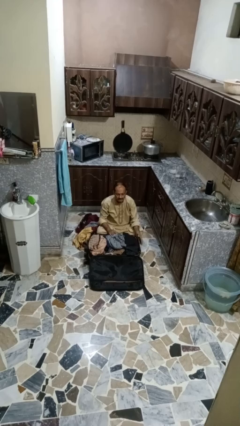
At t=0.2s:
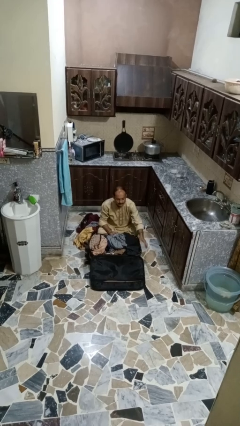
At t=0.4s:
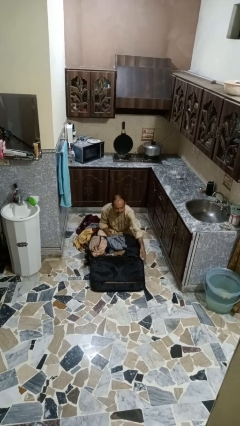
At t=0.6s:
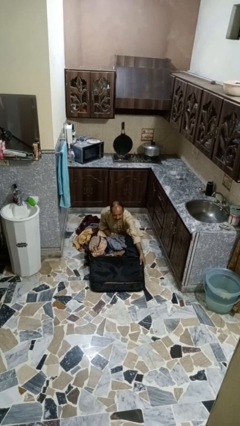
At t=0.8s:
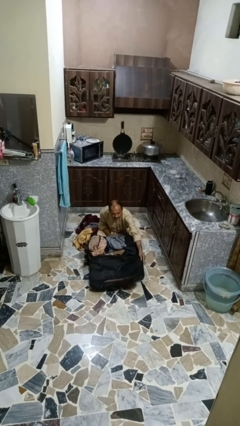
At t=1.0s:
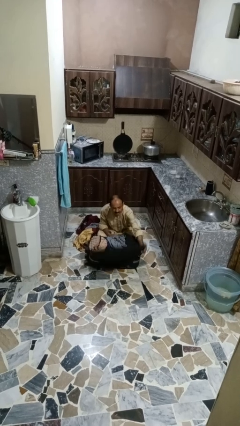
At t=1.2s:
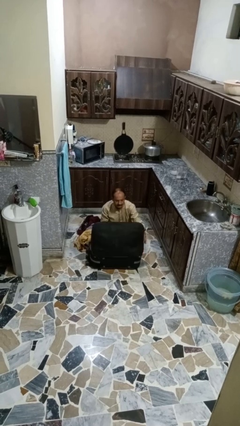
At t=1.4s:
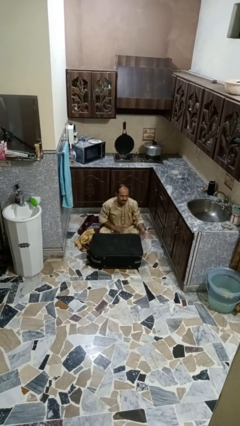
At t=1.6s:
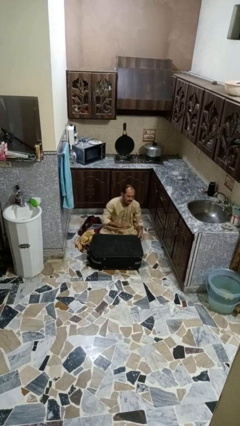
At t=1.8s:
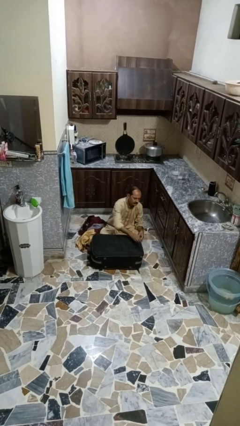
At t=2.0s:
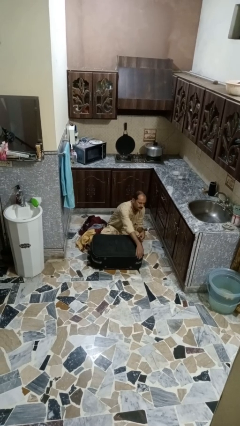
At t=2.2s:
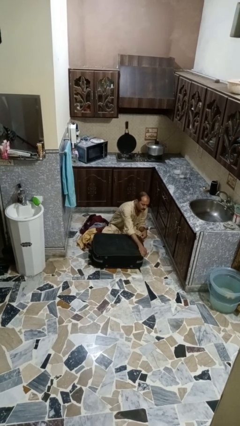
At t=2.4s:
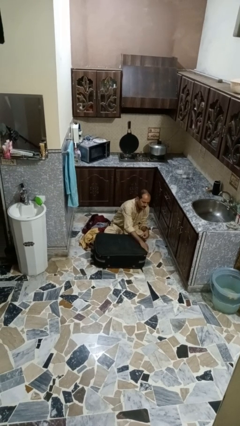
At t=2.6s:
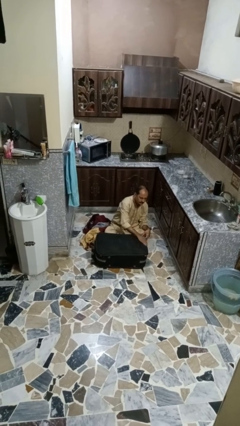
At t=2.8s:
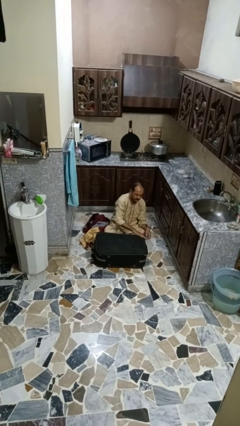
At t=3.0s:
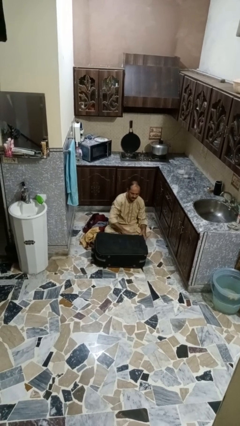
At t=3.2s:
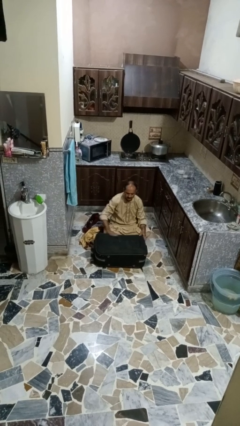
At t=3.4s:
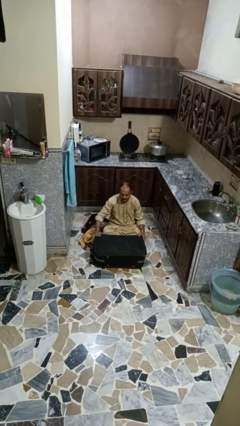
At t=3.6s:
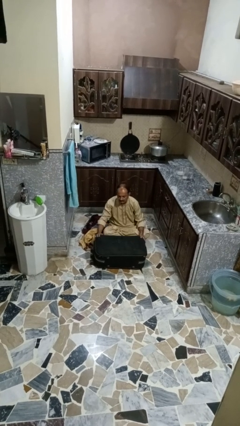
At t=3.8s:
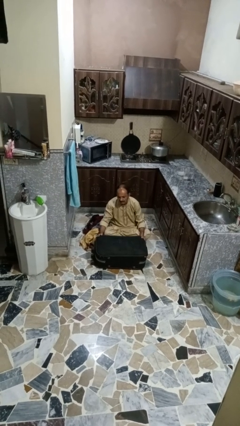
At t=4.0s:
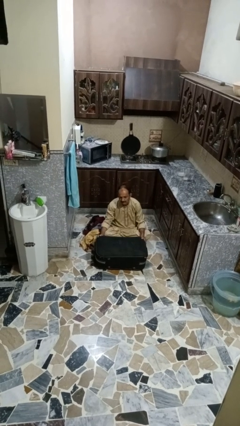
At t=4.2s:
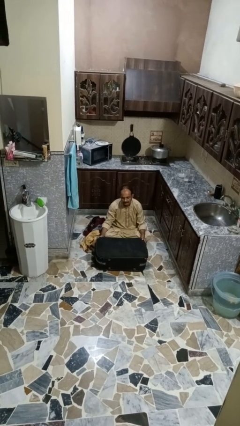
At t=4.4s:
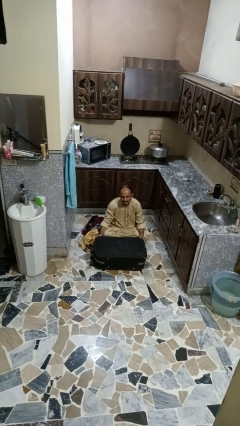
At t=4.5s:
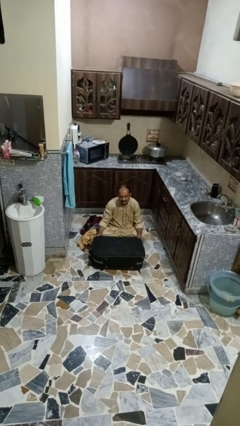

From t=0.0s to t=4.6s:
person closes suitcase

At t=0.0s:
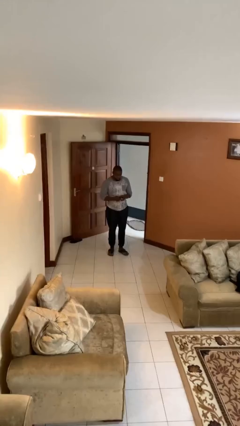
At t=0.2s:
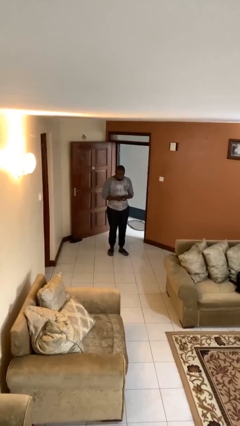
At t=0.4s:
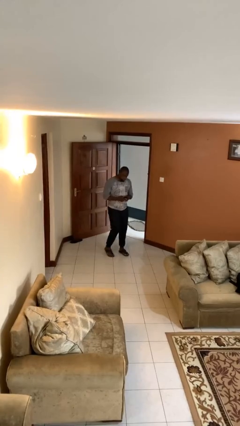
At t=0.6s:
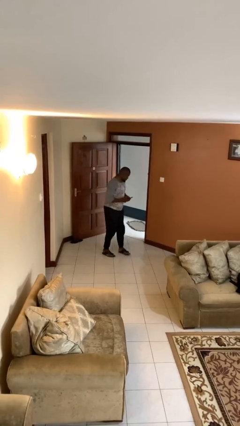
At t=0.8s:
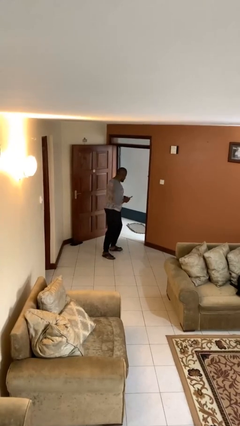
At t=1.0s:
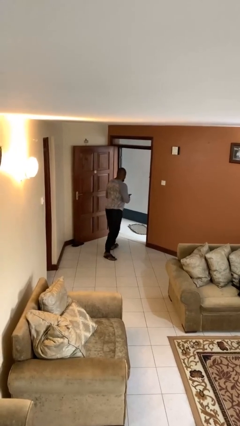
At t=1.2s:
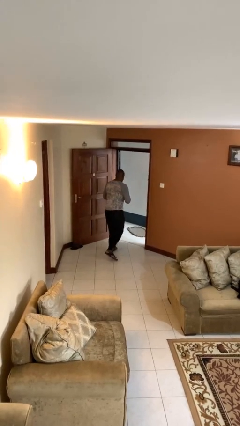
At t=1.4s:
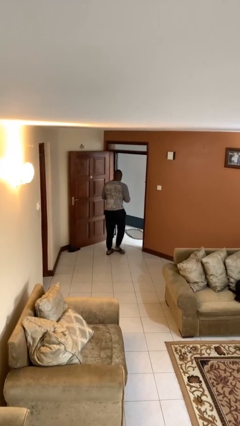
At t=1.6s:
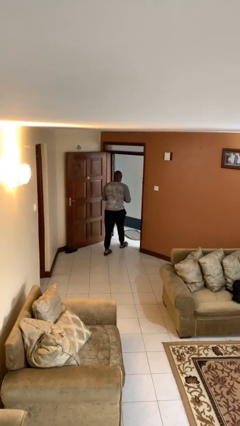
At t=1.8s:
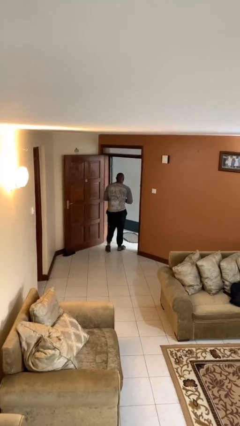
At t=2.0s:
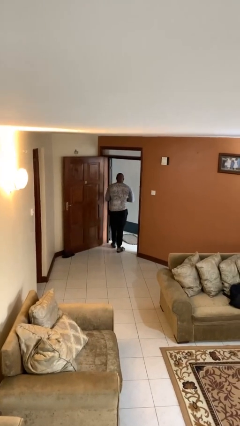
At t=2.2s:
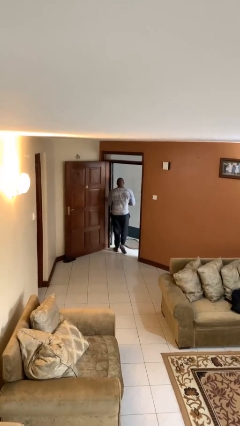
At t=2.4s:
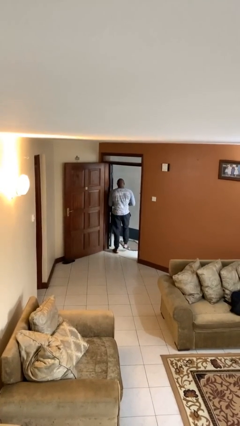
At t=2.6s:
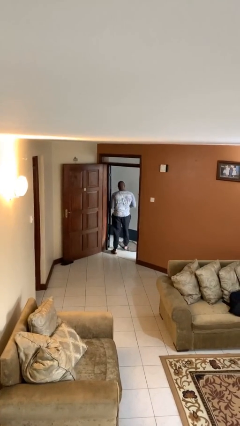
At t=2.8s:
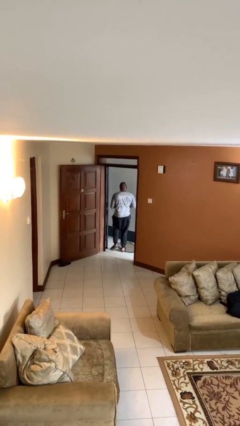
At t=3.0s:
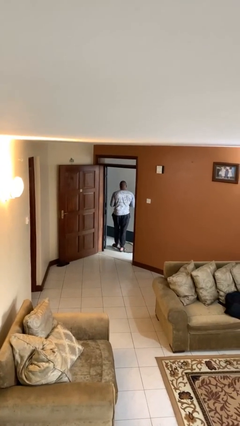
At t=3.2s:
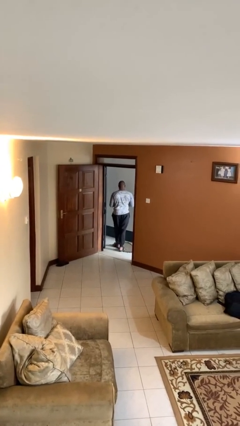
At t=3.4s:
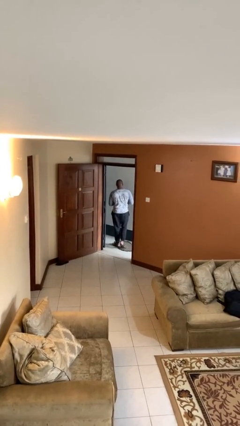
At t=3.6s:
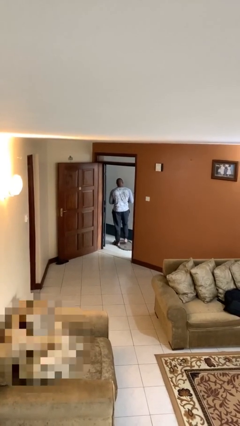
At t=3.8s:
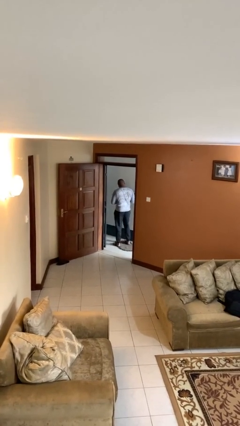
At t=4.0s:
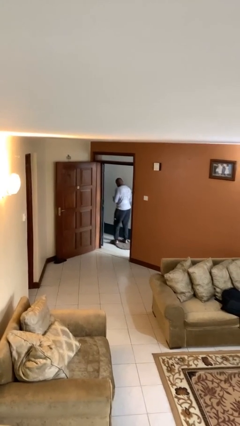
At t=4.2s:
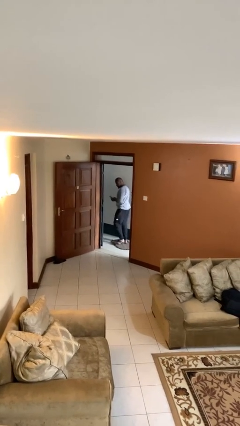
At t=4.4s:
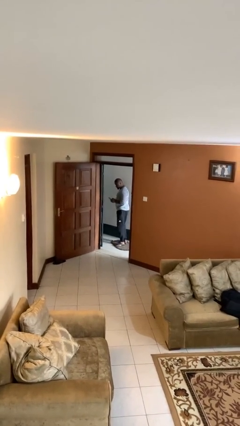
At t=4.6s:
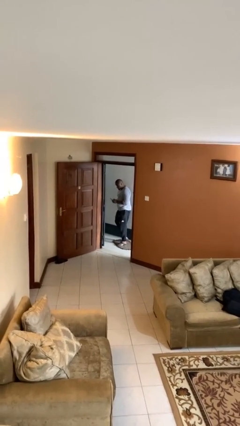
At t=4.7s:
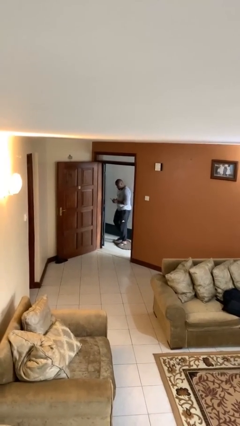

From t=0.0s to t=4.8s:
person exits scene through structure

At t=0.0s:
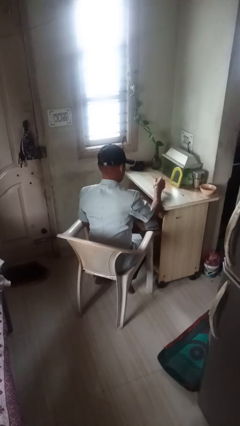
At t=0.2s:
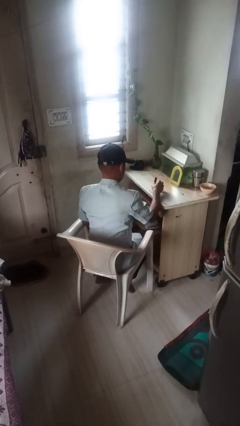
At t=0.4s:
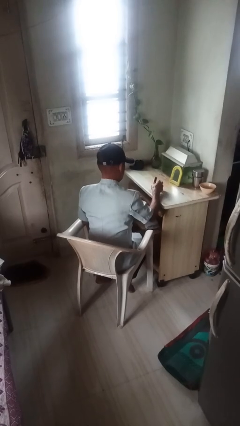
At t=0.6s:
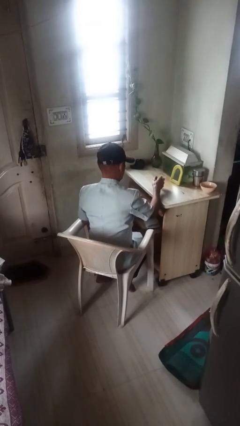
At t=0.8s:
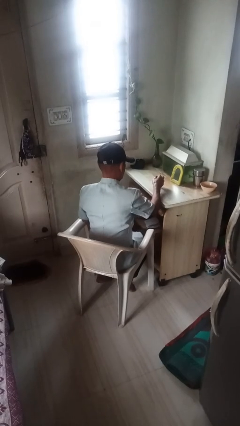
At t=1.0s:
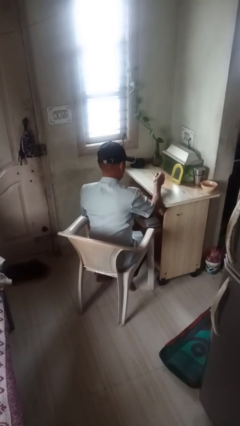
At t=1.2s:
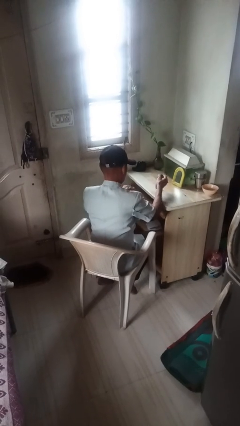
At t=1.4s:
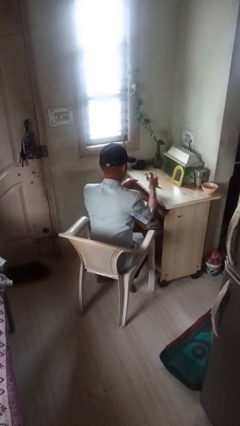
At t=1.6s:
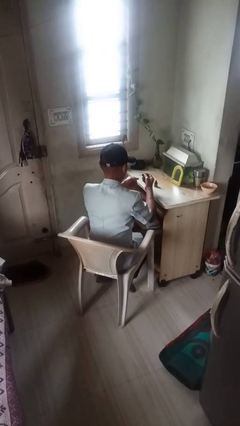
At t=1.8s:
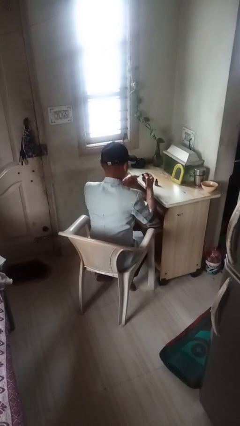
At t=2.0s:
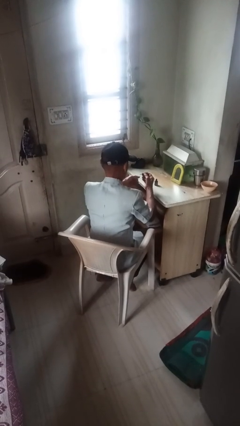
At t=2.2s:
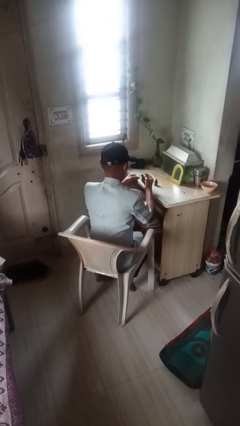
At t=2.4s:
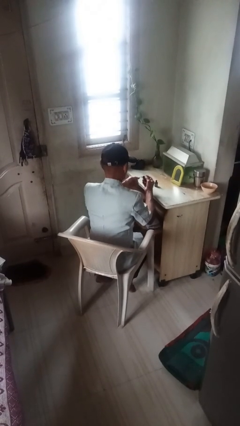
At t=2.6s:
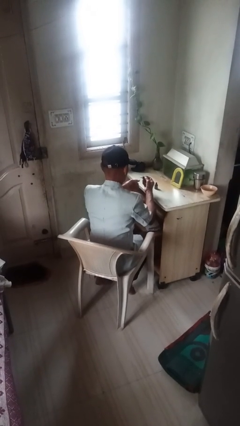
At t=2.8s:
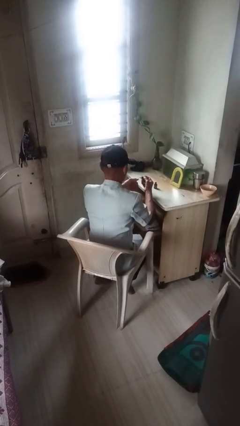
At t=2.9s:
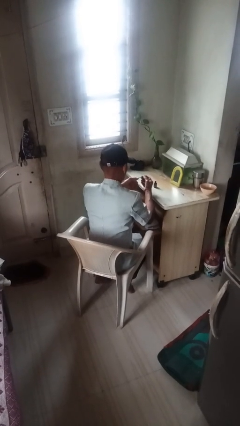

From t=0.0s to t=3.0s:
person paints fingernails

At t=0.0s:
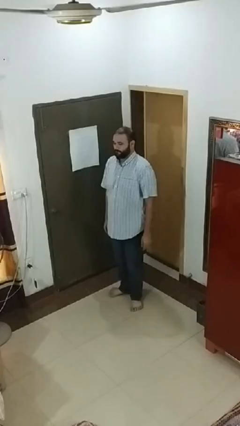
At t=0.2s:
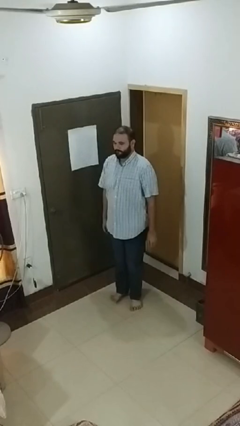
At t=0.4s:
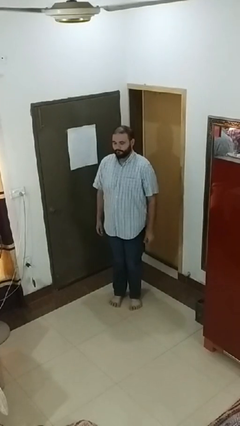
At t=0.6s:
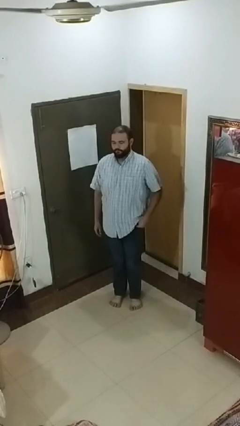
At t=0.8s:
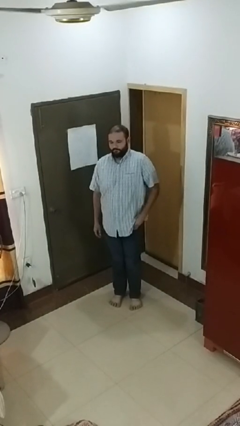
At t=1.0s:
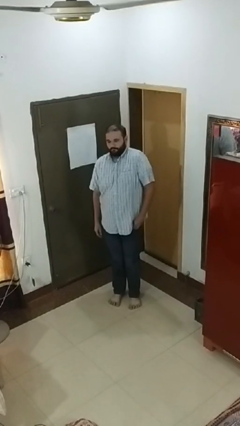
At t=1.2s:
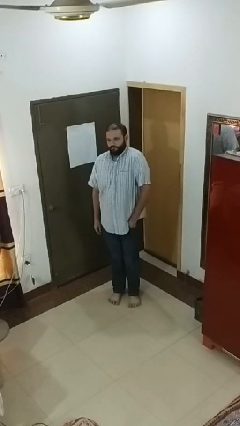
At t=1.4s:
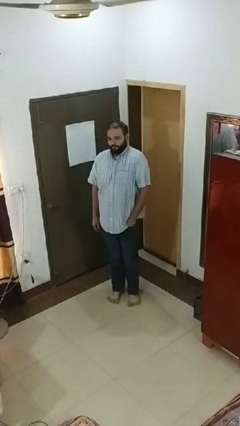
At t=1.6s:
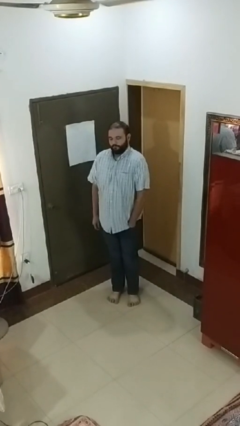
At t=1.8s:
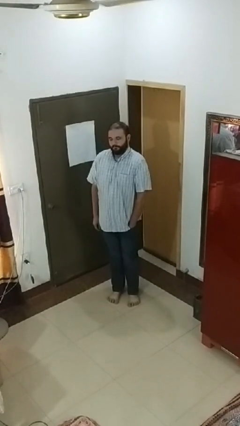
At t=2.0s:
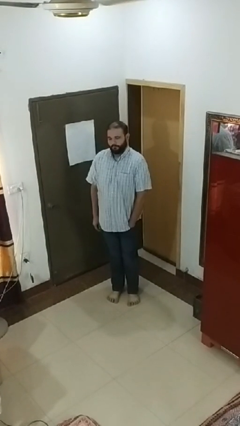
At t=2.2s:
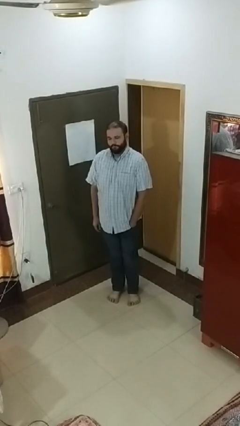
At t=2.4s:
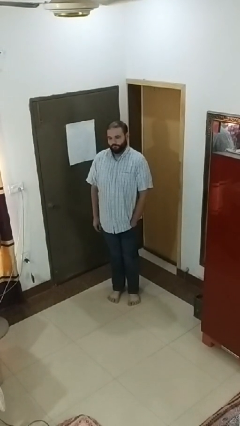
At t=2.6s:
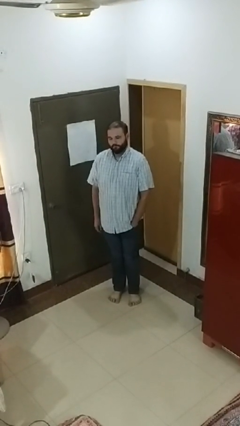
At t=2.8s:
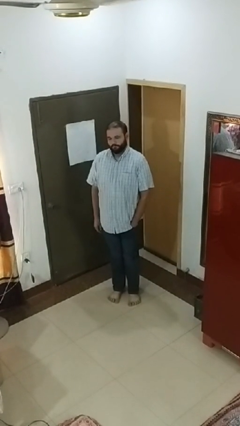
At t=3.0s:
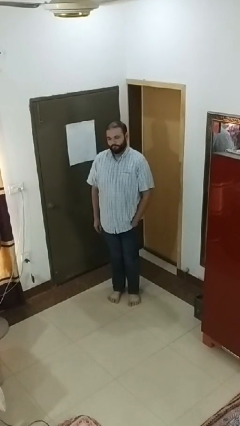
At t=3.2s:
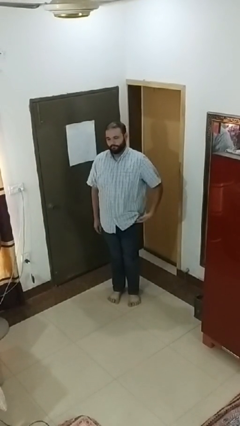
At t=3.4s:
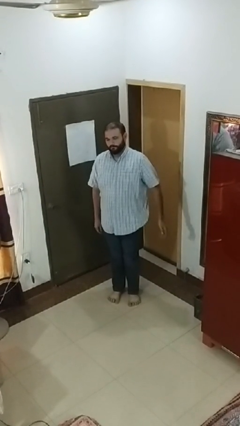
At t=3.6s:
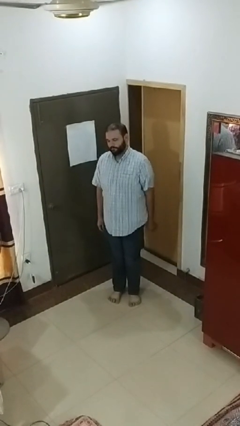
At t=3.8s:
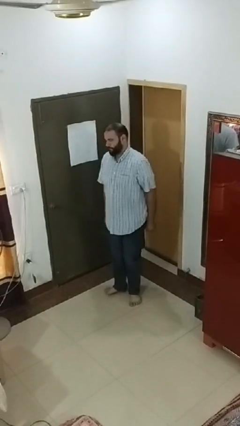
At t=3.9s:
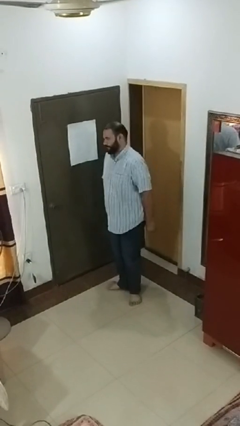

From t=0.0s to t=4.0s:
person puts hands in back pockets

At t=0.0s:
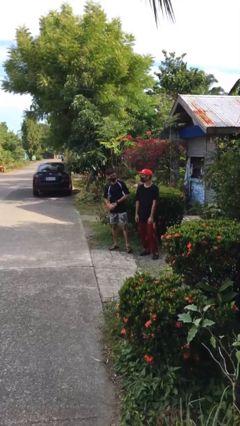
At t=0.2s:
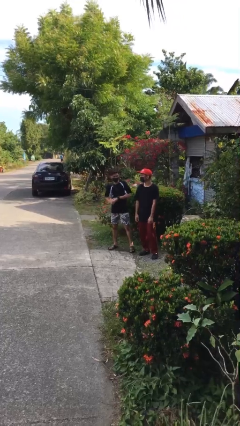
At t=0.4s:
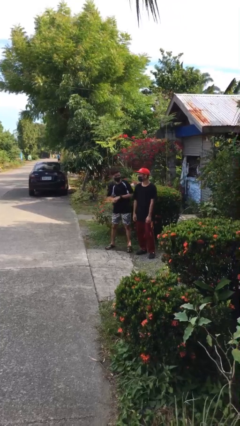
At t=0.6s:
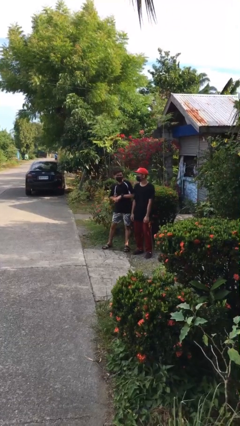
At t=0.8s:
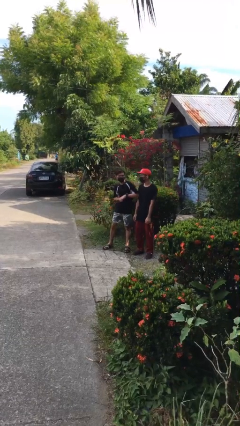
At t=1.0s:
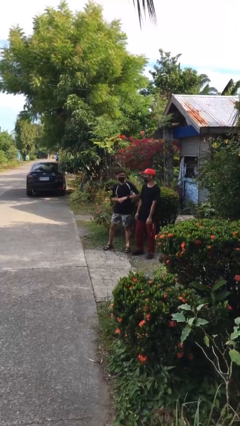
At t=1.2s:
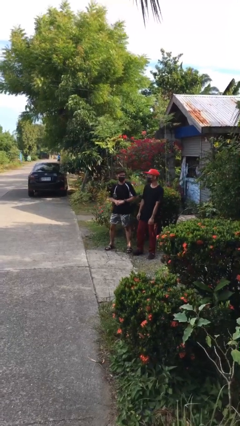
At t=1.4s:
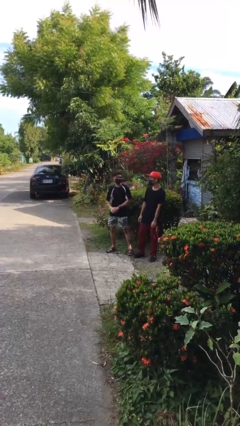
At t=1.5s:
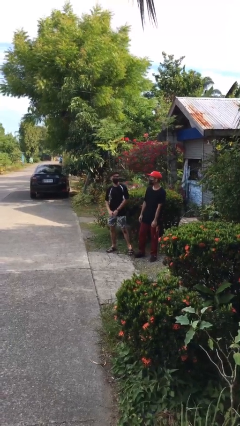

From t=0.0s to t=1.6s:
person nudges person with elbow
